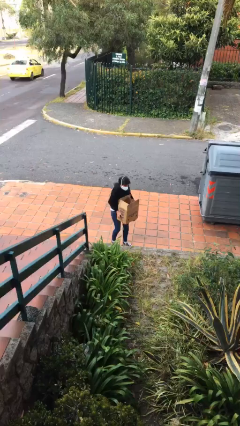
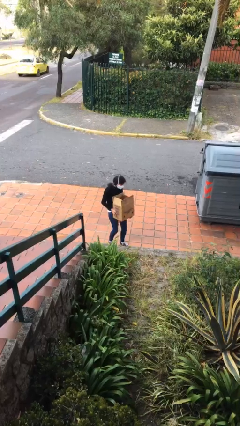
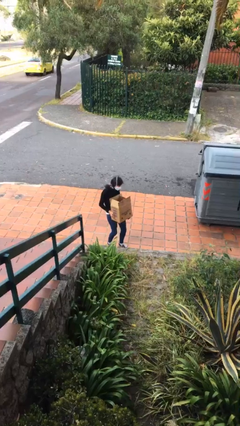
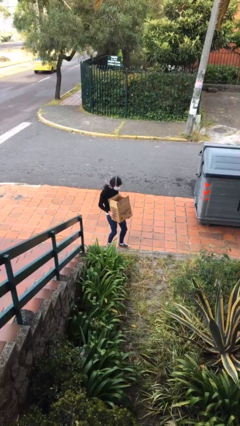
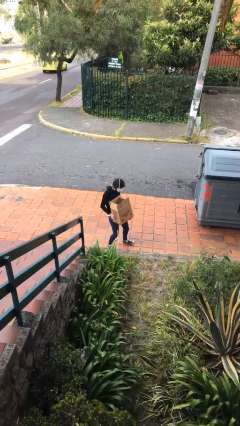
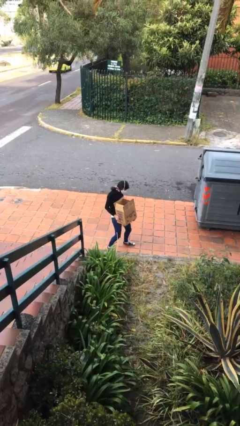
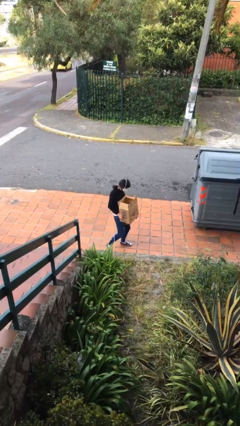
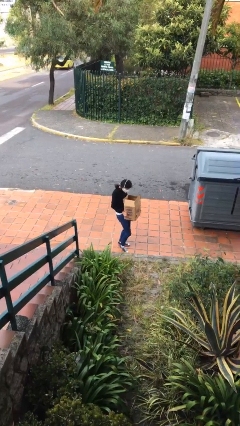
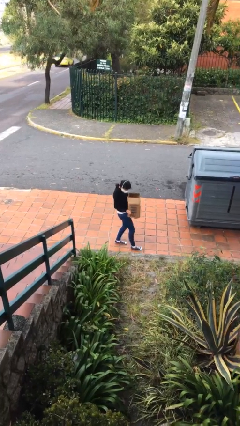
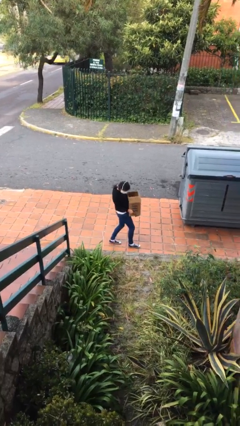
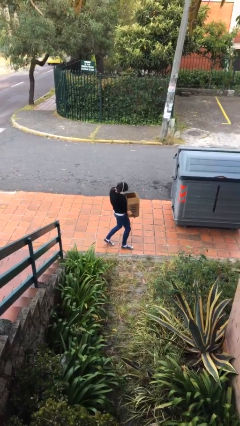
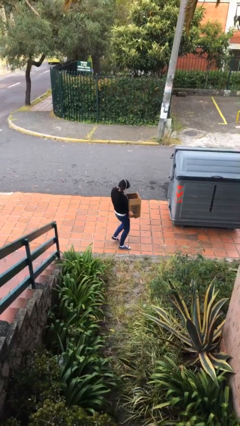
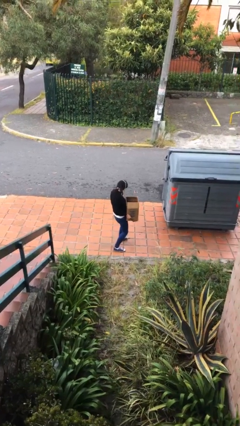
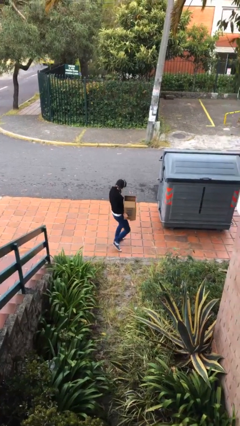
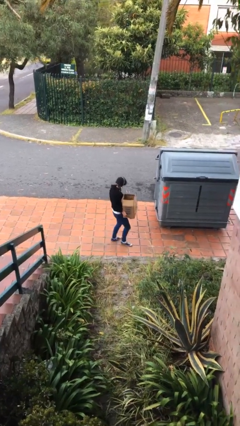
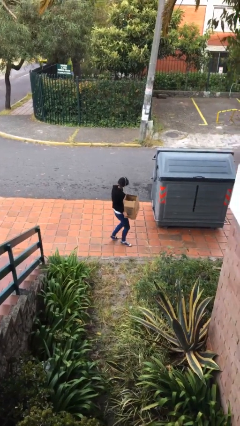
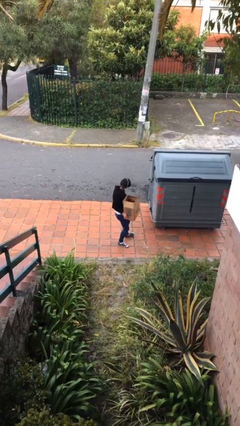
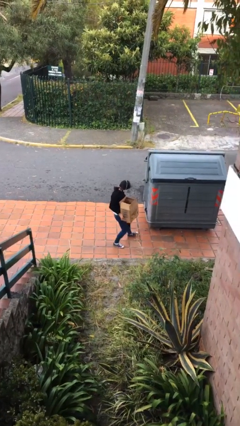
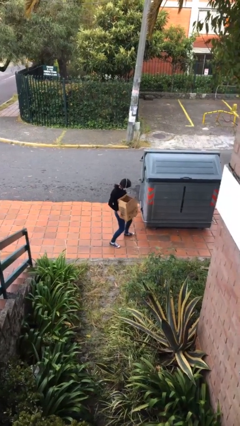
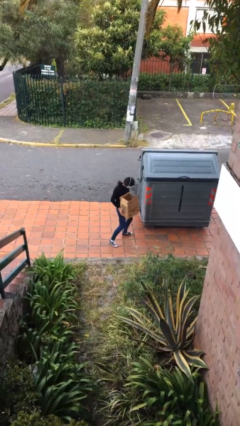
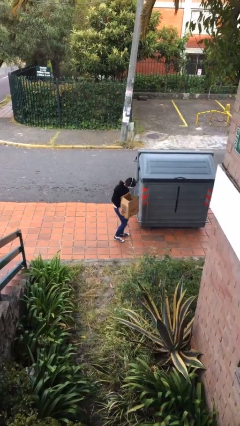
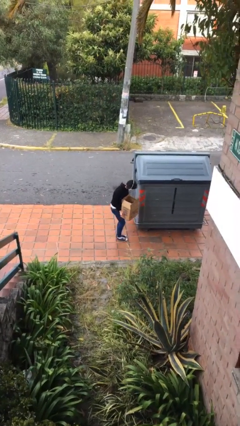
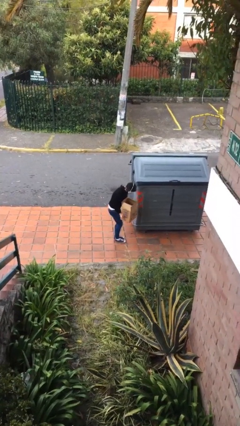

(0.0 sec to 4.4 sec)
person carries heavy object

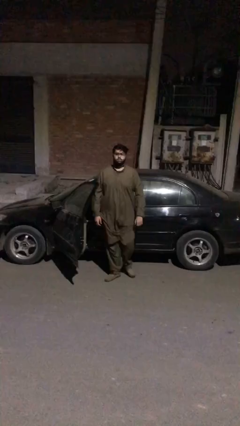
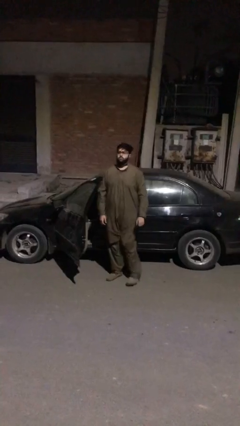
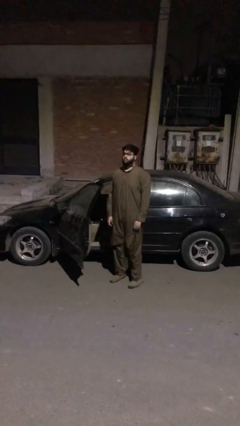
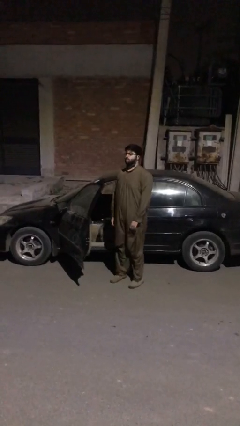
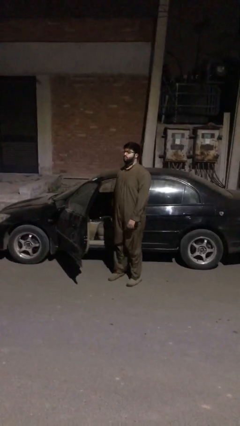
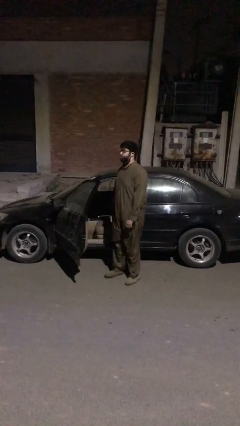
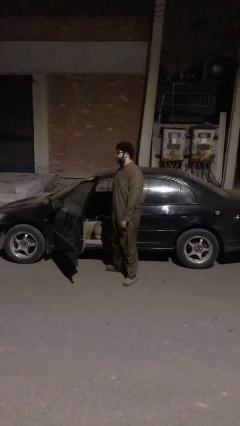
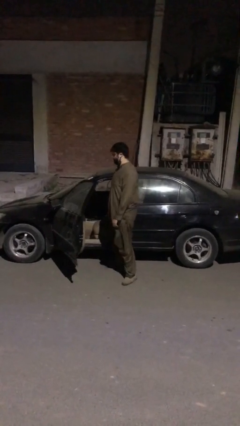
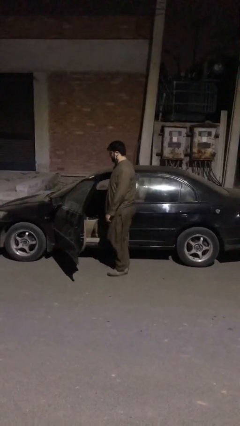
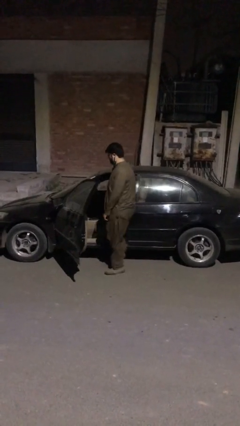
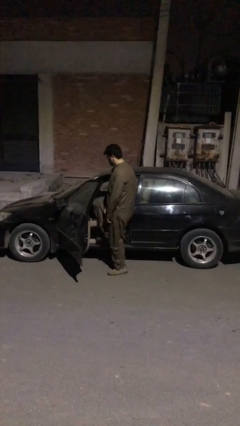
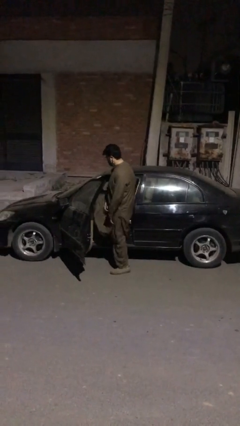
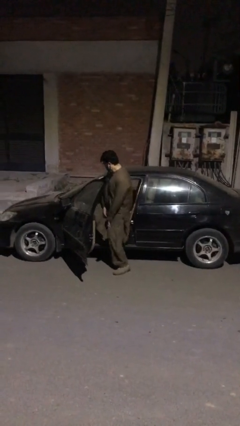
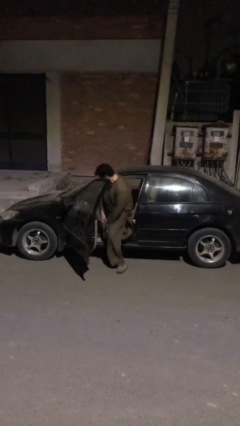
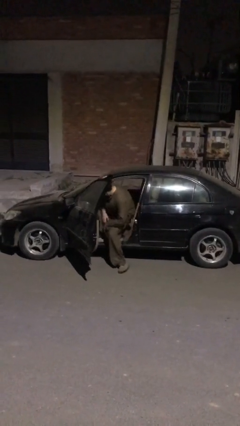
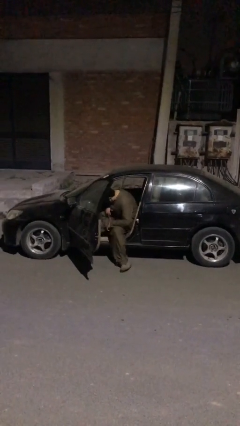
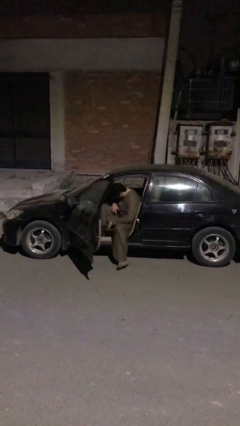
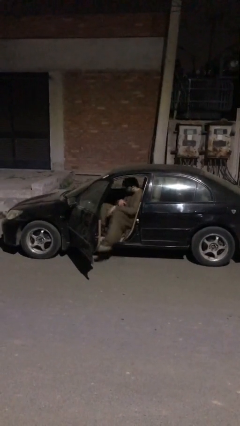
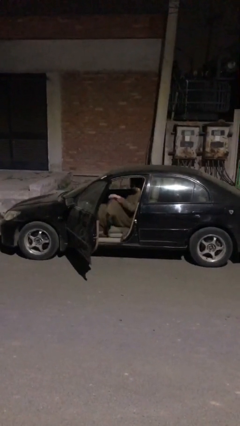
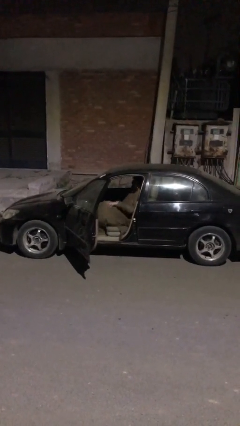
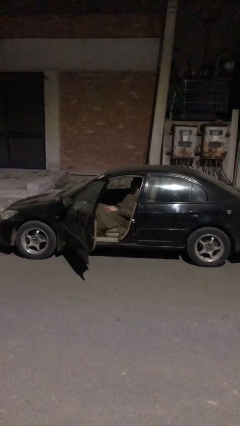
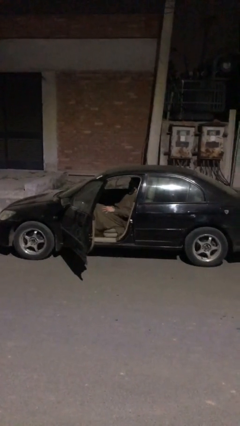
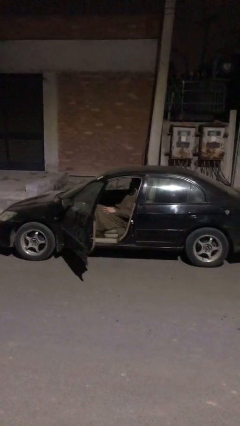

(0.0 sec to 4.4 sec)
person enters car

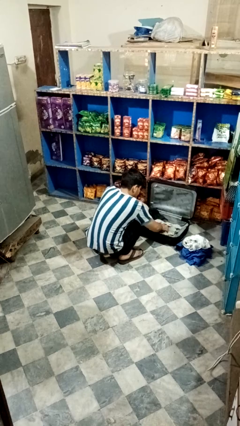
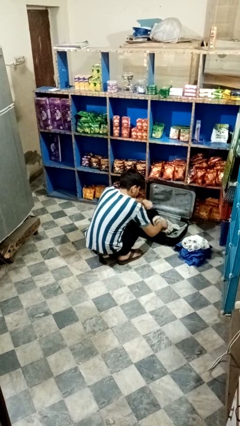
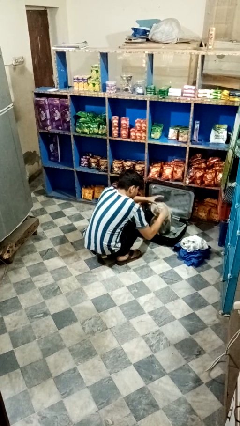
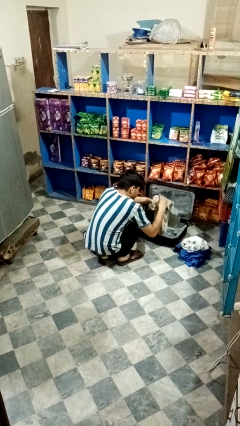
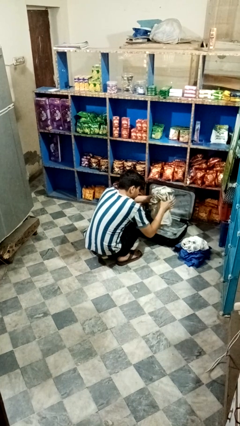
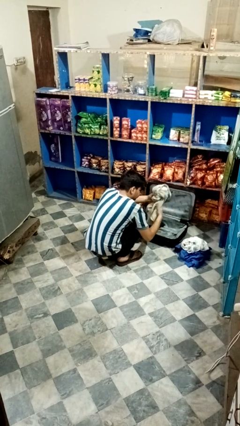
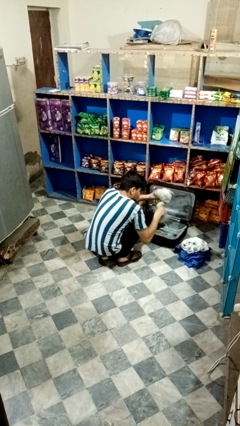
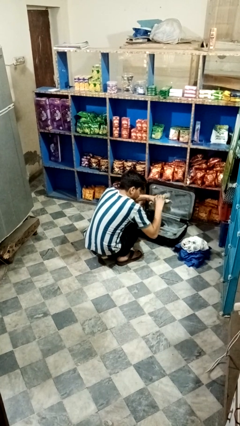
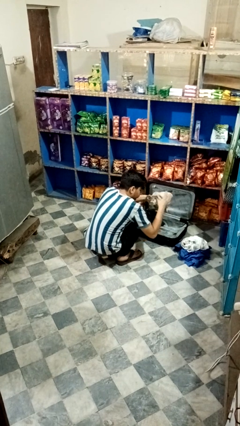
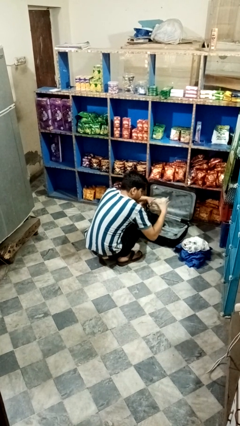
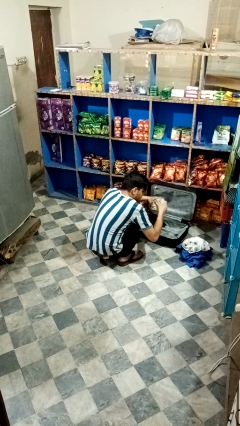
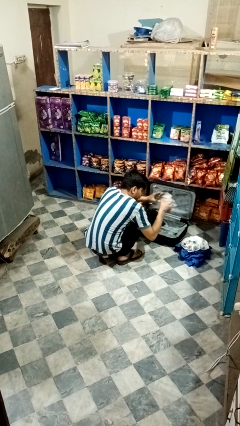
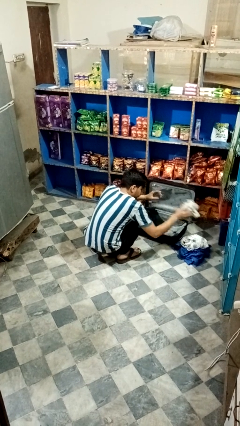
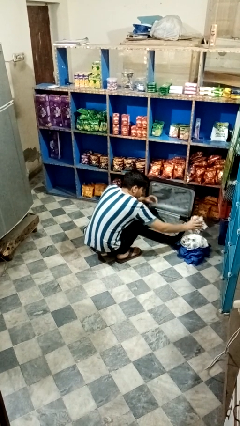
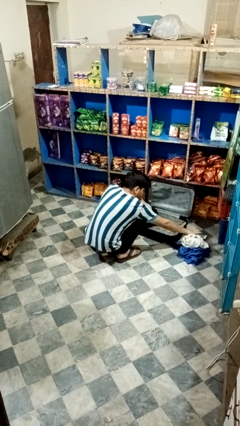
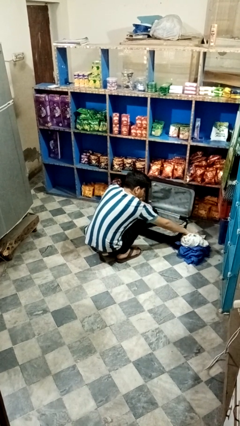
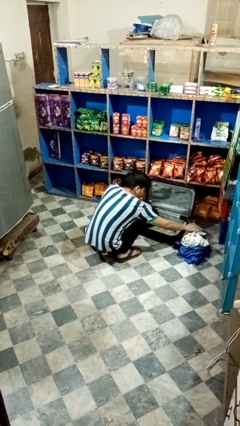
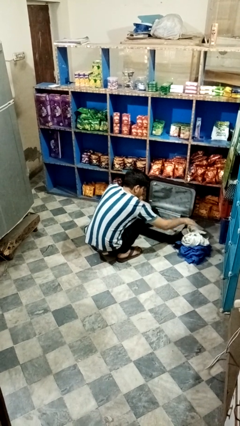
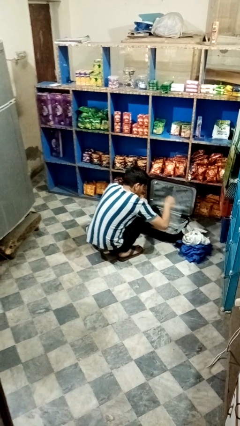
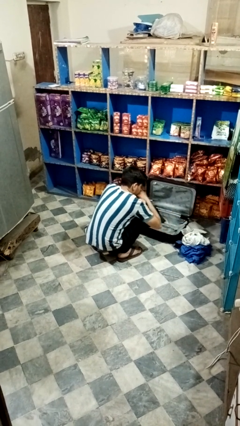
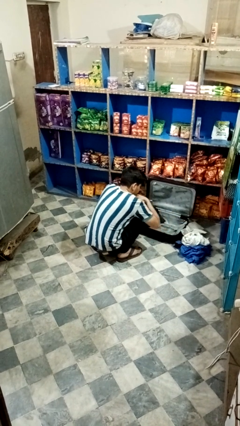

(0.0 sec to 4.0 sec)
person unloads clothes from suitcase

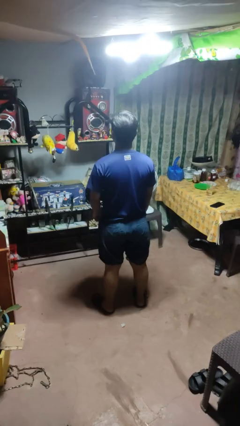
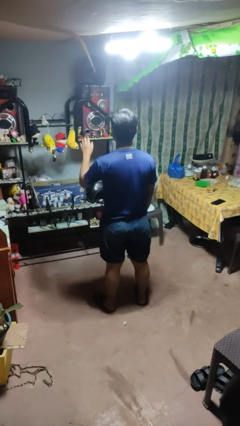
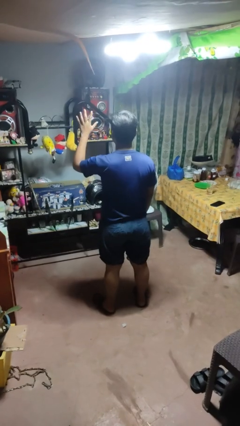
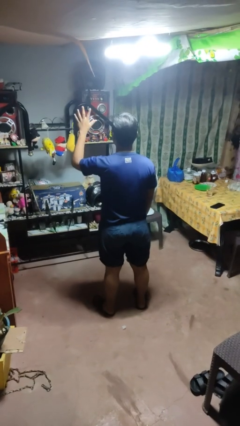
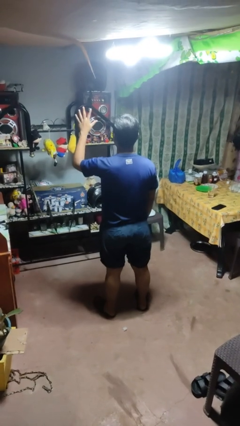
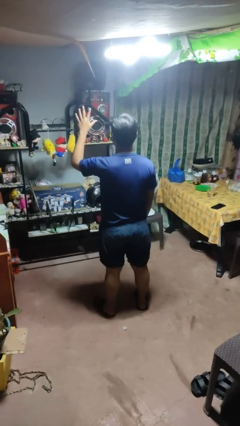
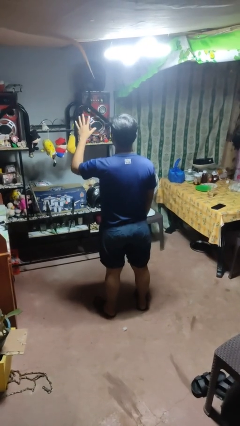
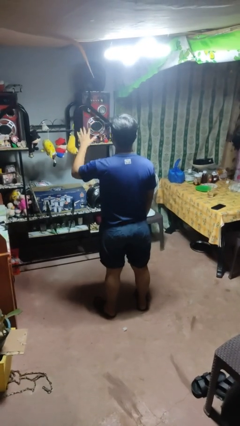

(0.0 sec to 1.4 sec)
person gestures number five

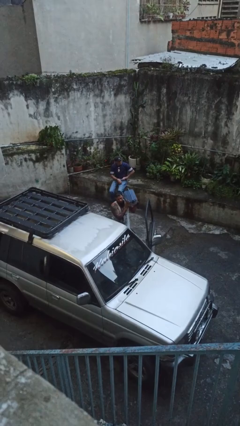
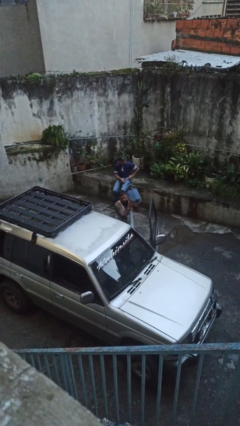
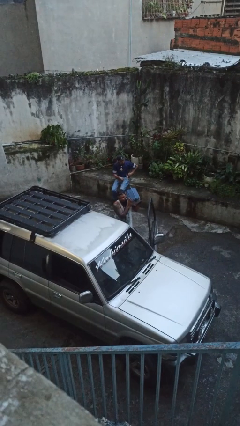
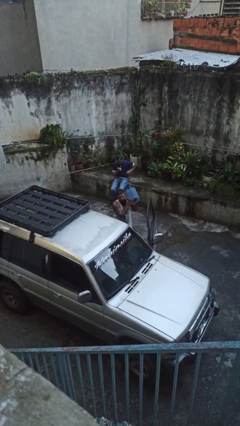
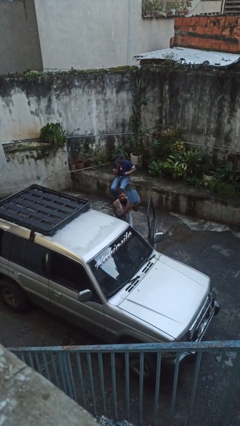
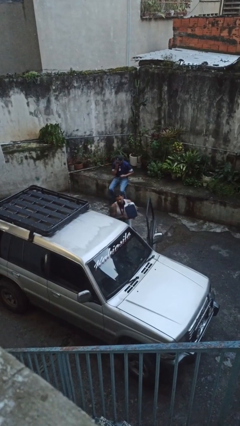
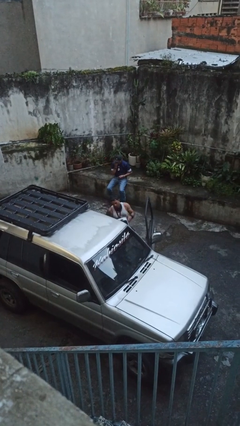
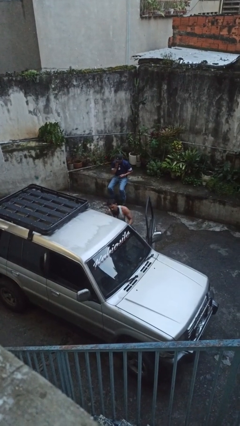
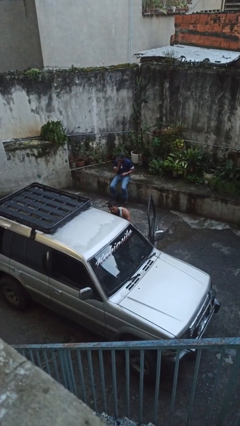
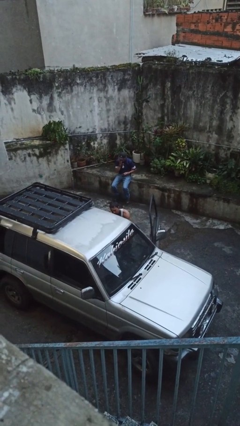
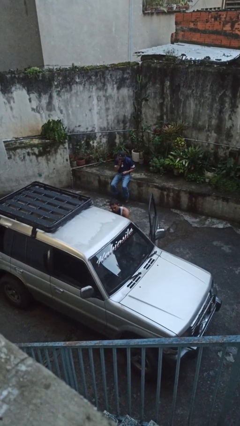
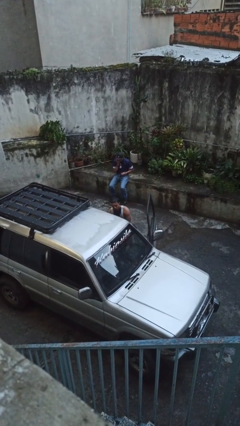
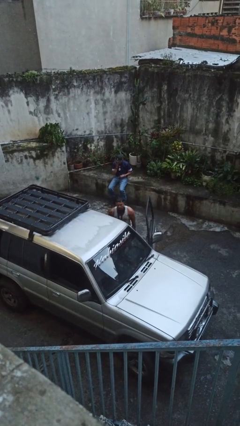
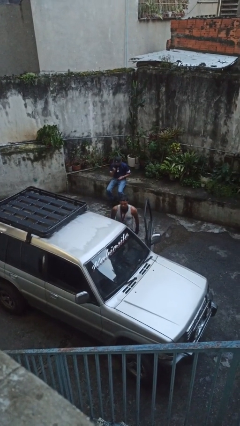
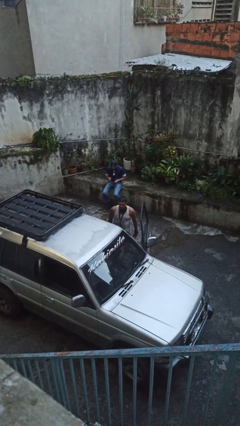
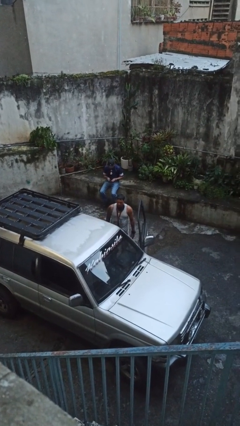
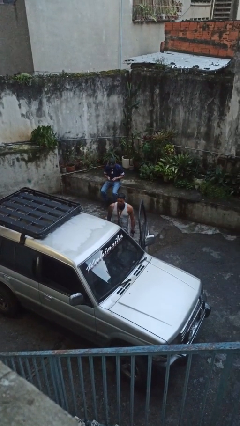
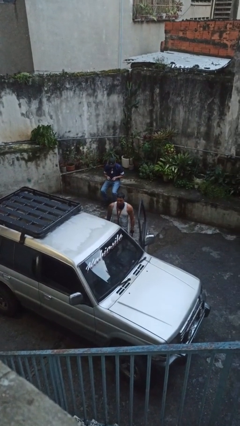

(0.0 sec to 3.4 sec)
person loads car
